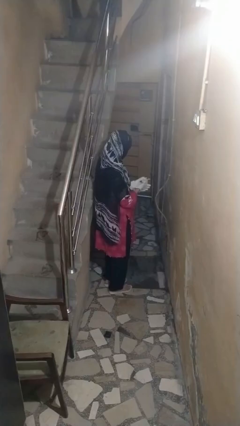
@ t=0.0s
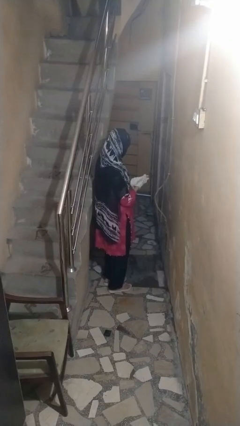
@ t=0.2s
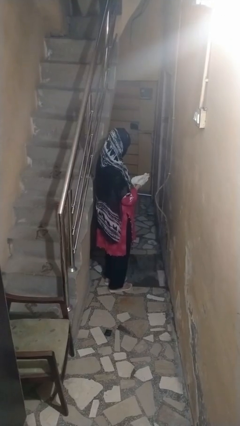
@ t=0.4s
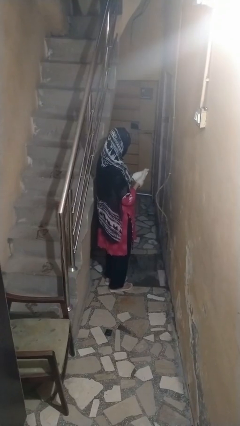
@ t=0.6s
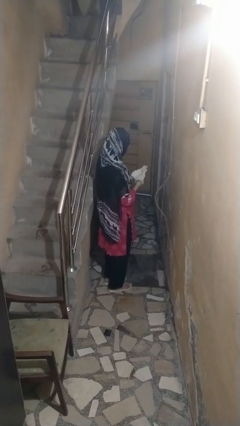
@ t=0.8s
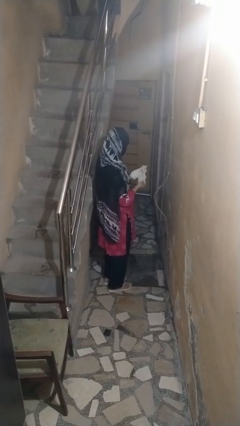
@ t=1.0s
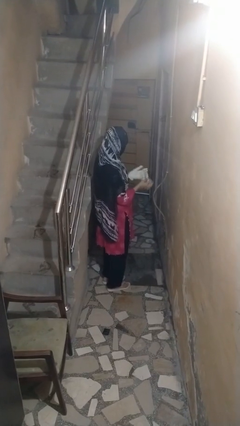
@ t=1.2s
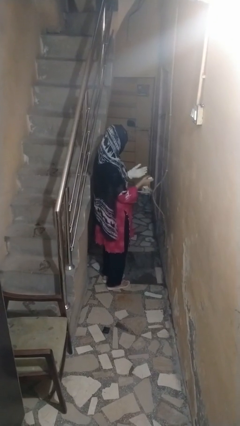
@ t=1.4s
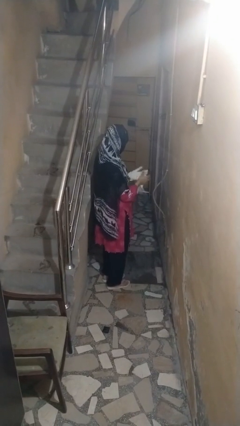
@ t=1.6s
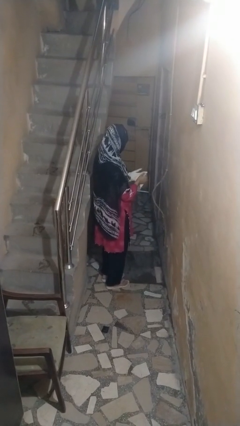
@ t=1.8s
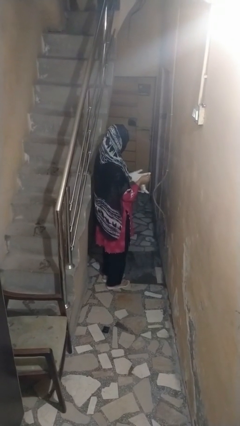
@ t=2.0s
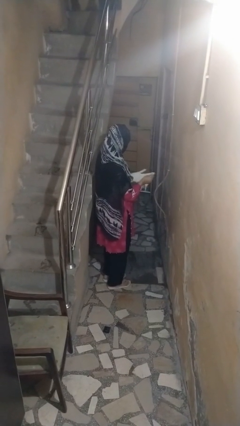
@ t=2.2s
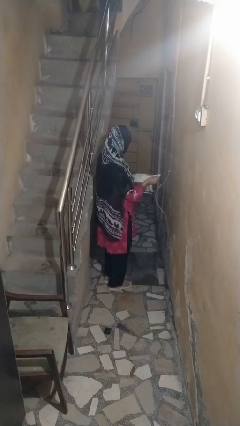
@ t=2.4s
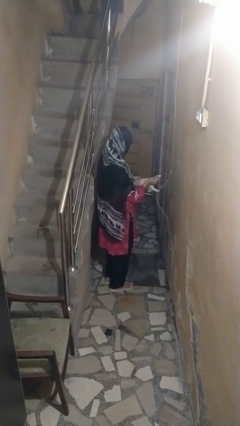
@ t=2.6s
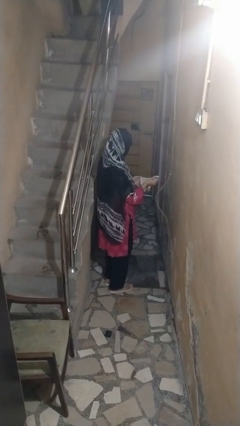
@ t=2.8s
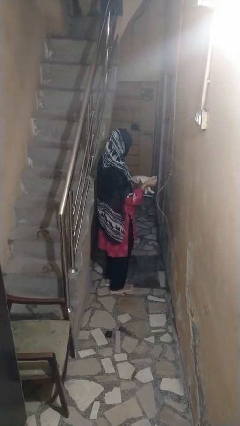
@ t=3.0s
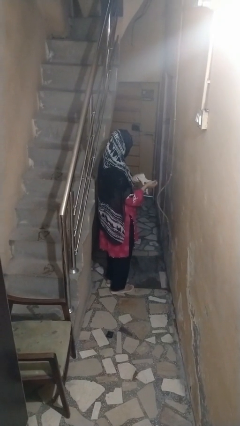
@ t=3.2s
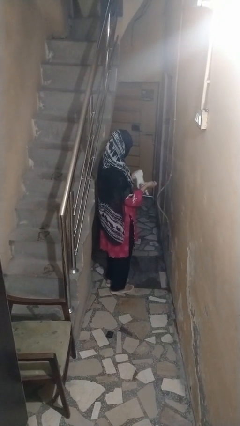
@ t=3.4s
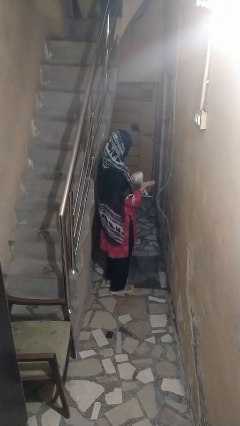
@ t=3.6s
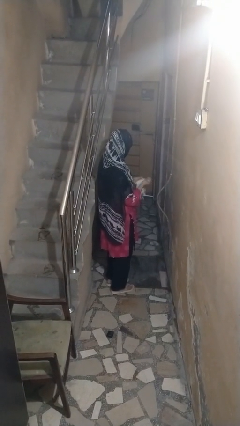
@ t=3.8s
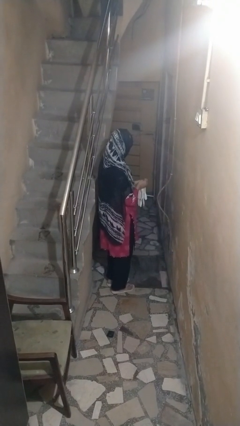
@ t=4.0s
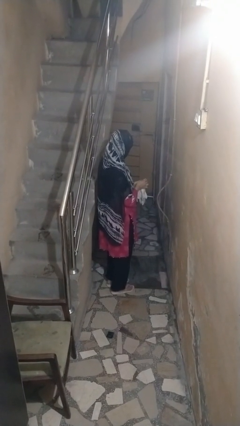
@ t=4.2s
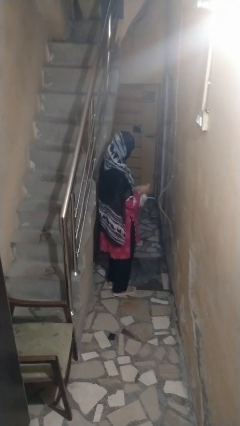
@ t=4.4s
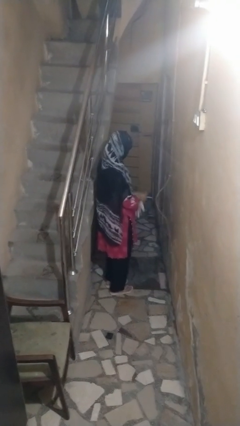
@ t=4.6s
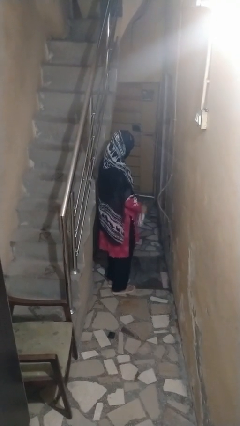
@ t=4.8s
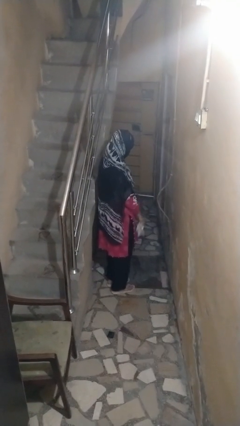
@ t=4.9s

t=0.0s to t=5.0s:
person takes off gloves

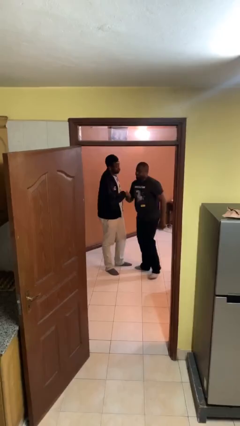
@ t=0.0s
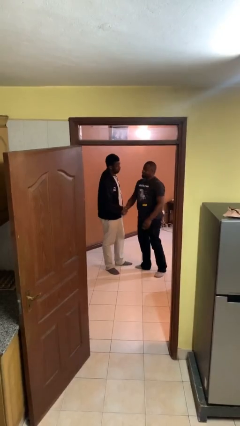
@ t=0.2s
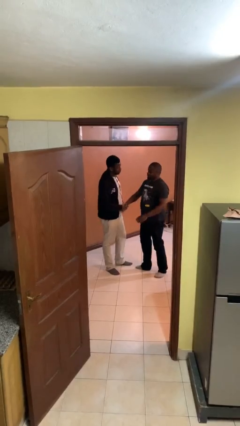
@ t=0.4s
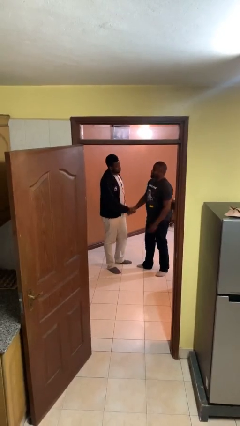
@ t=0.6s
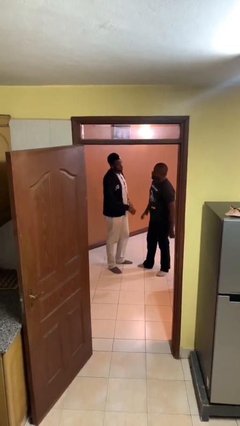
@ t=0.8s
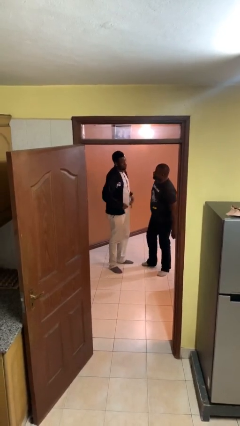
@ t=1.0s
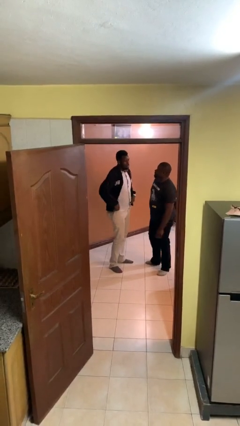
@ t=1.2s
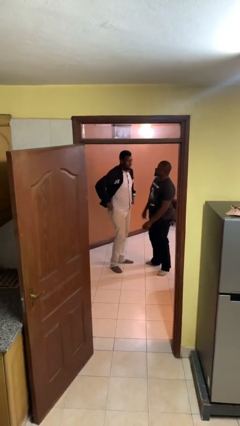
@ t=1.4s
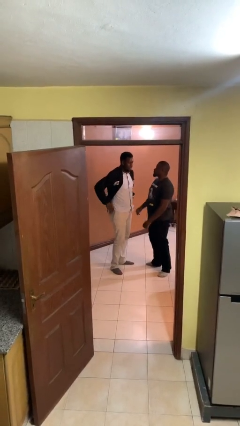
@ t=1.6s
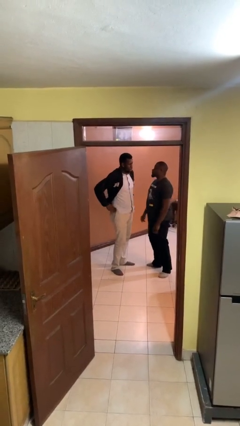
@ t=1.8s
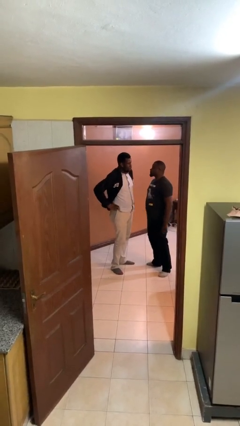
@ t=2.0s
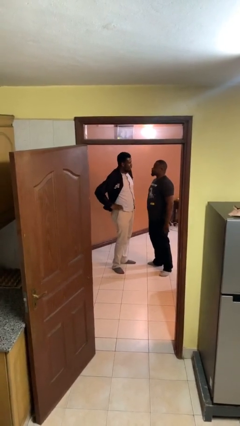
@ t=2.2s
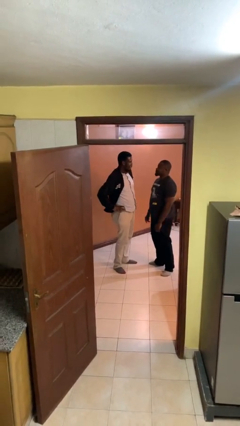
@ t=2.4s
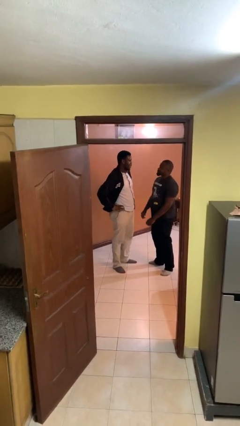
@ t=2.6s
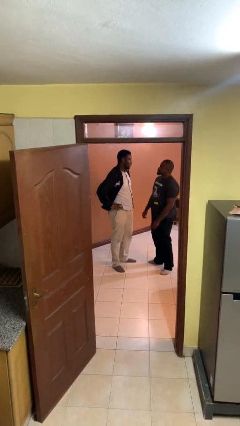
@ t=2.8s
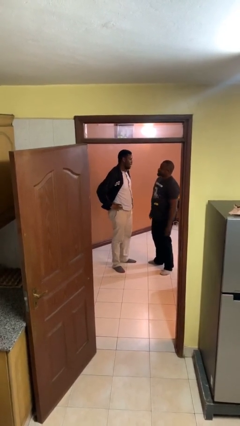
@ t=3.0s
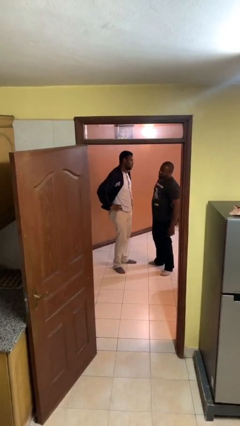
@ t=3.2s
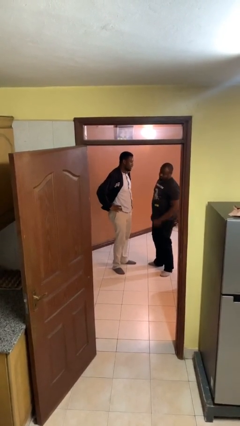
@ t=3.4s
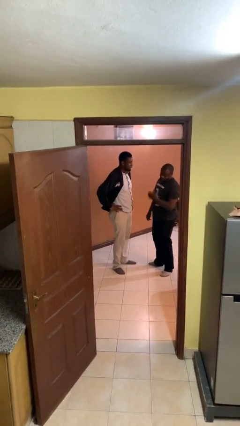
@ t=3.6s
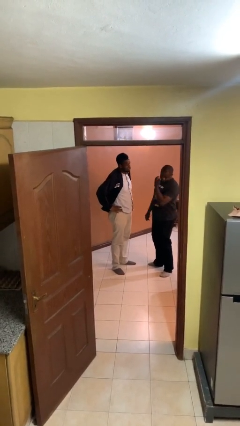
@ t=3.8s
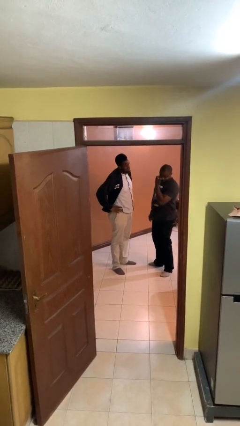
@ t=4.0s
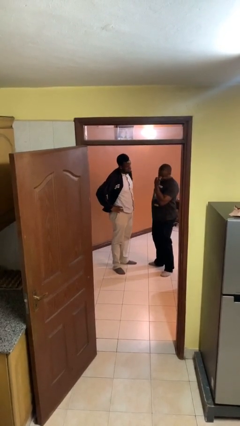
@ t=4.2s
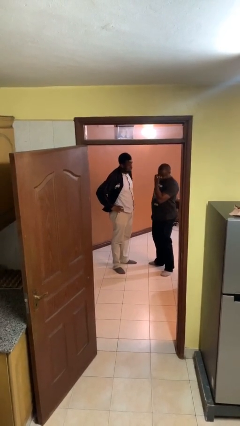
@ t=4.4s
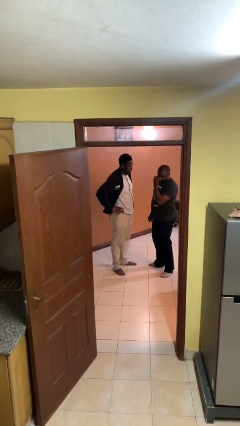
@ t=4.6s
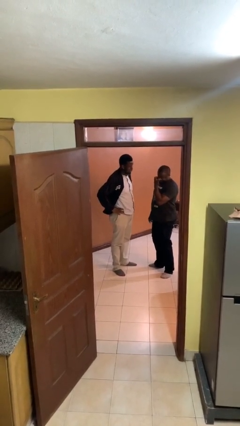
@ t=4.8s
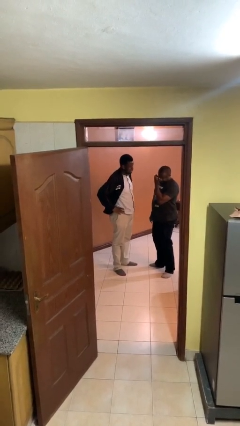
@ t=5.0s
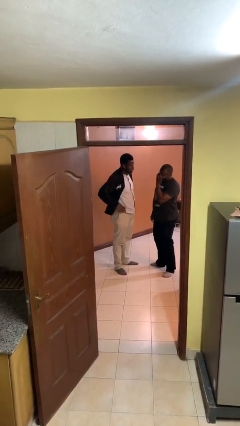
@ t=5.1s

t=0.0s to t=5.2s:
person talks to person

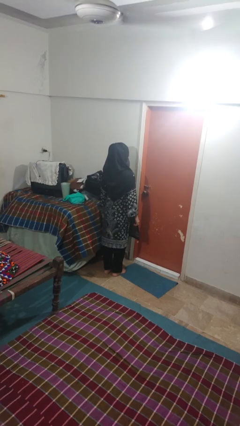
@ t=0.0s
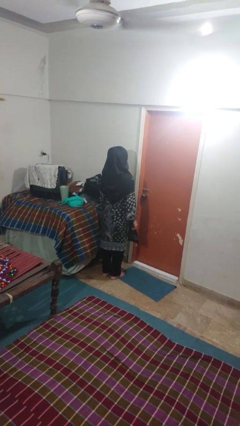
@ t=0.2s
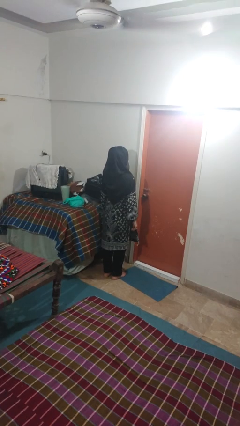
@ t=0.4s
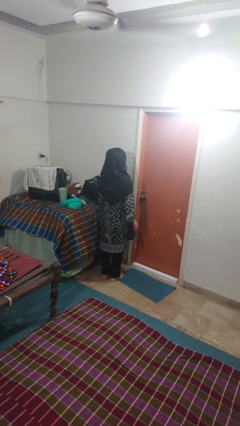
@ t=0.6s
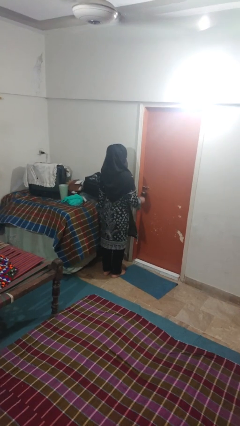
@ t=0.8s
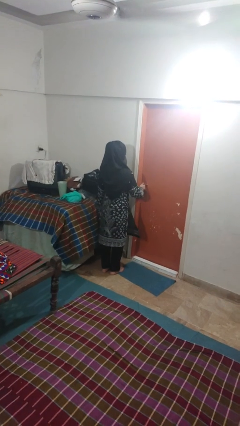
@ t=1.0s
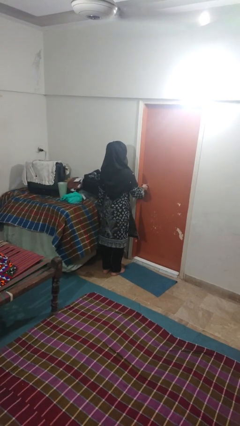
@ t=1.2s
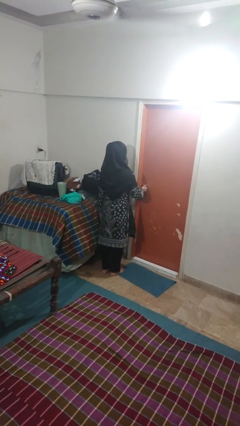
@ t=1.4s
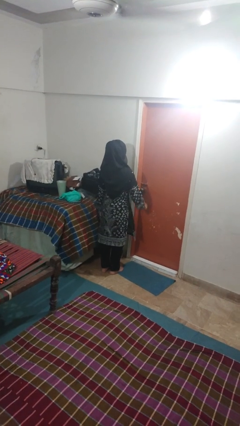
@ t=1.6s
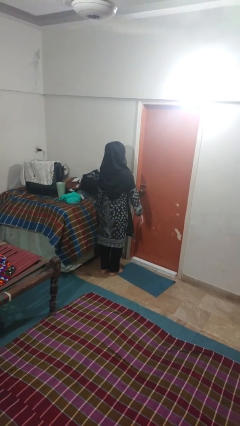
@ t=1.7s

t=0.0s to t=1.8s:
person unlocks door with keys

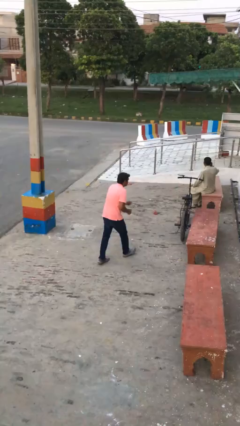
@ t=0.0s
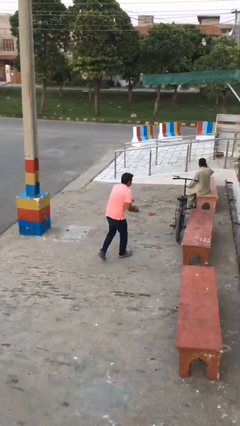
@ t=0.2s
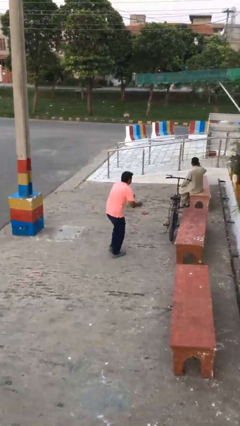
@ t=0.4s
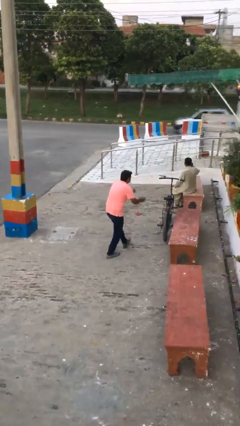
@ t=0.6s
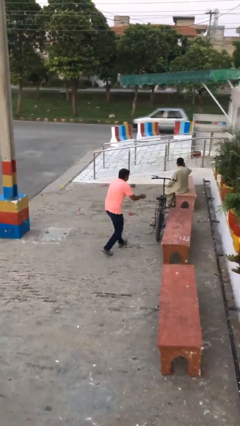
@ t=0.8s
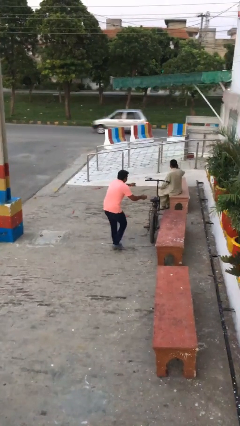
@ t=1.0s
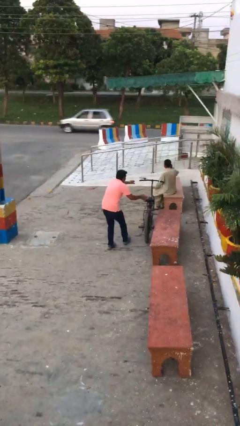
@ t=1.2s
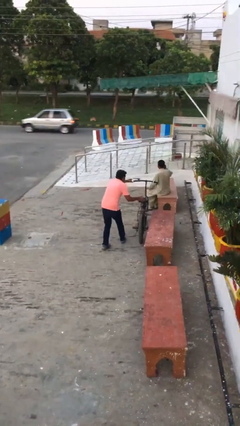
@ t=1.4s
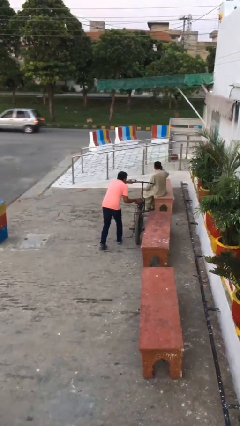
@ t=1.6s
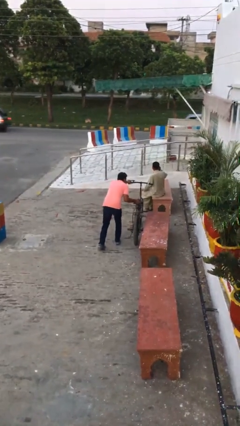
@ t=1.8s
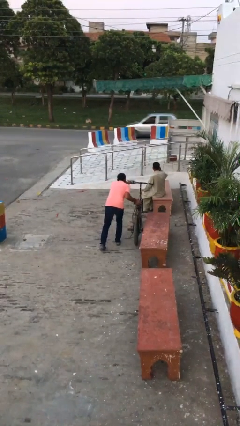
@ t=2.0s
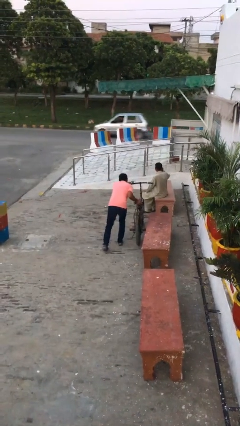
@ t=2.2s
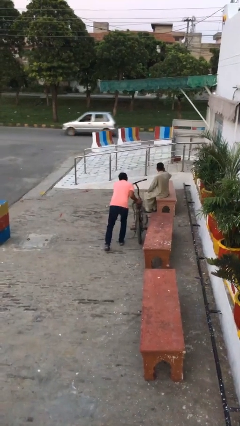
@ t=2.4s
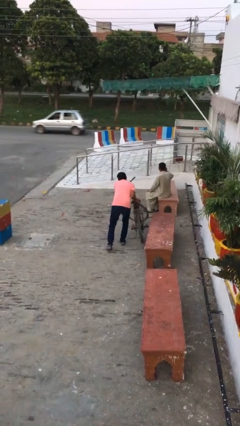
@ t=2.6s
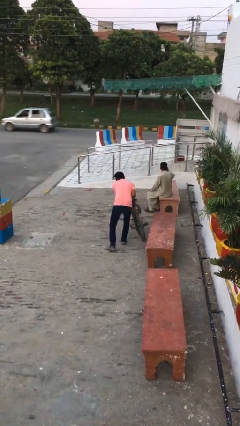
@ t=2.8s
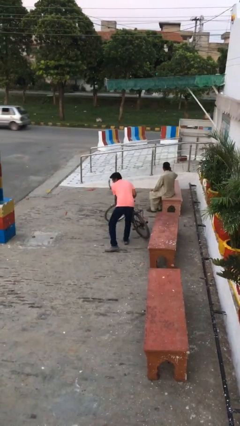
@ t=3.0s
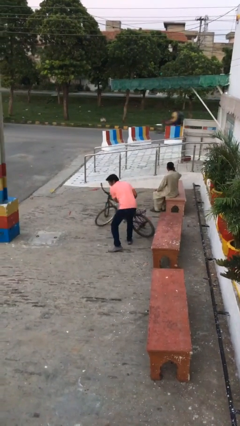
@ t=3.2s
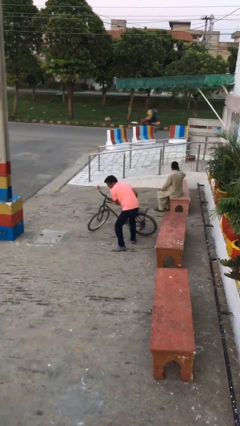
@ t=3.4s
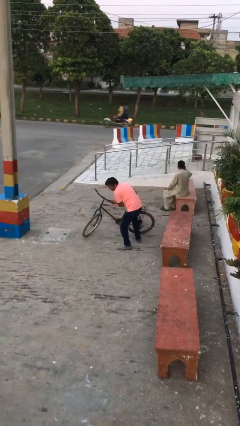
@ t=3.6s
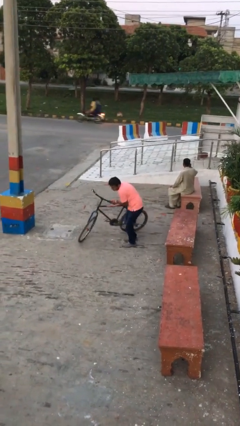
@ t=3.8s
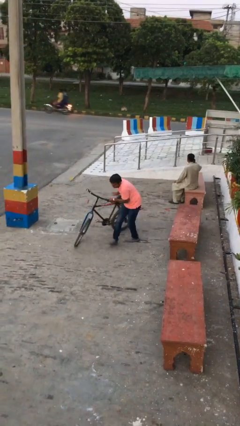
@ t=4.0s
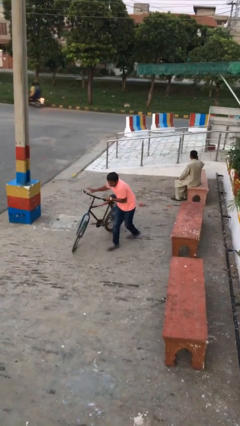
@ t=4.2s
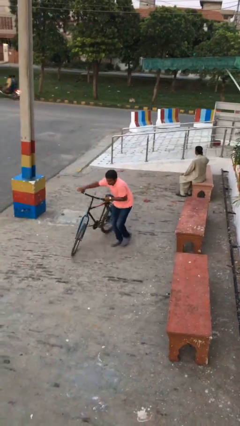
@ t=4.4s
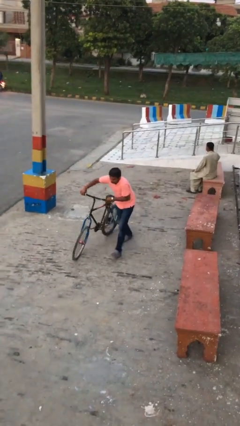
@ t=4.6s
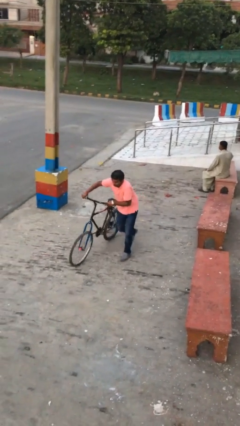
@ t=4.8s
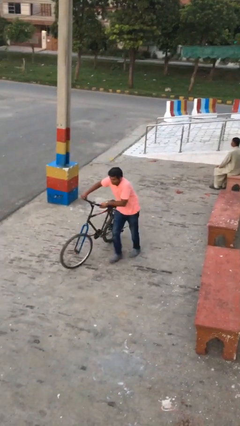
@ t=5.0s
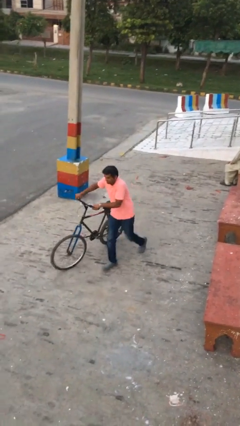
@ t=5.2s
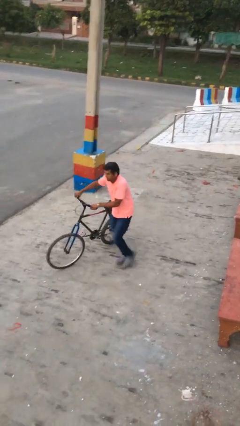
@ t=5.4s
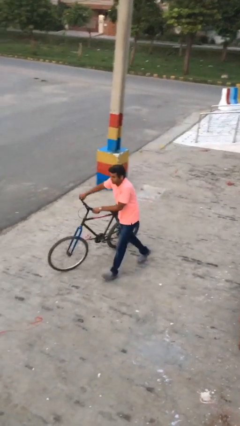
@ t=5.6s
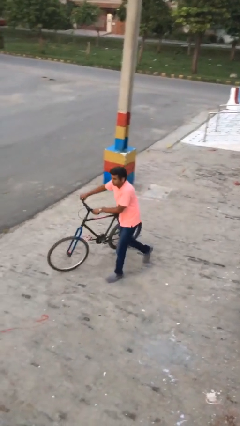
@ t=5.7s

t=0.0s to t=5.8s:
person steals object from person
